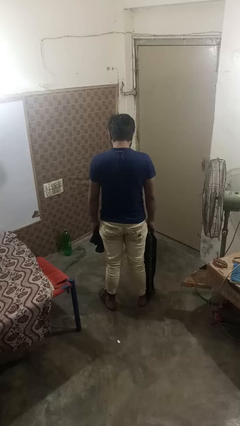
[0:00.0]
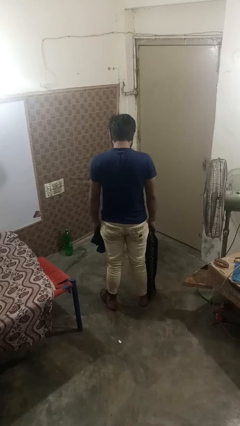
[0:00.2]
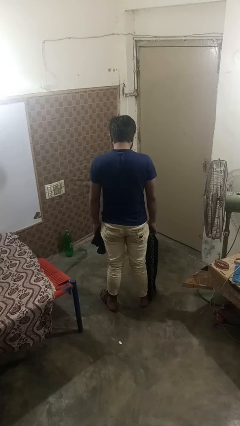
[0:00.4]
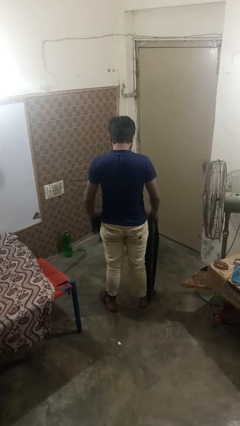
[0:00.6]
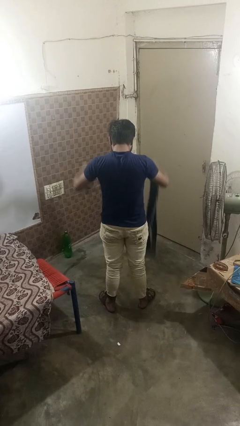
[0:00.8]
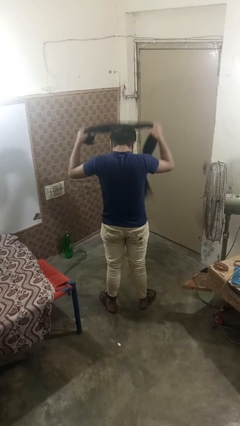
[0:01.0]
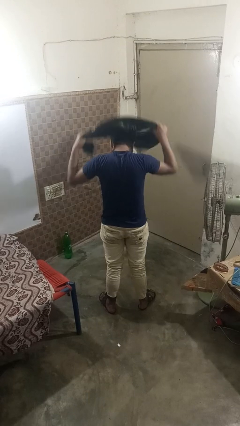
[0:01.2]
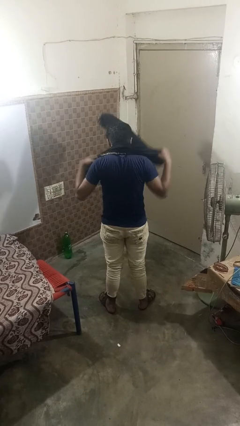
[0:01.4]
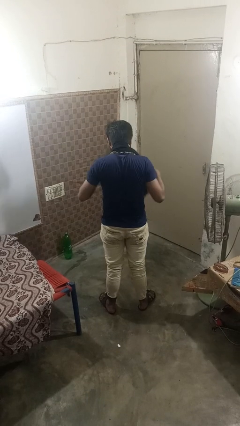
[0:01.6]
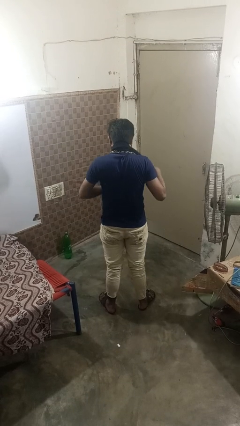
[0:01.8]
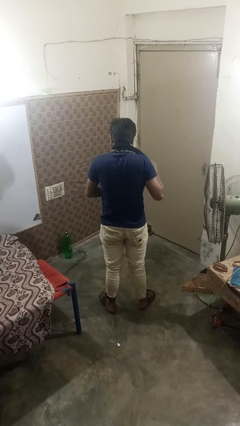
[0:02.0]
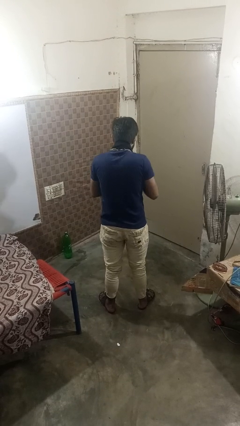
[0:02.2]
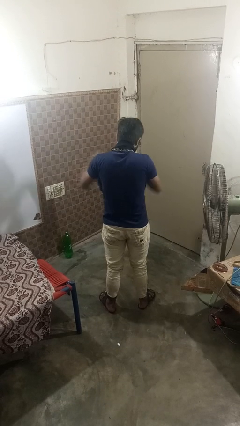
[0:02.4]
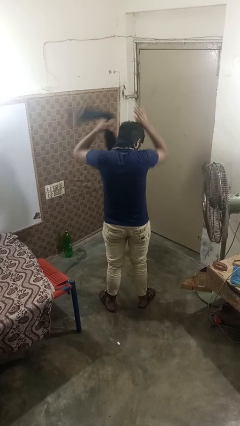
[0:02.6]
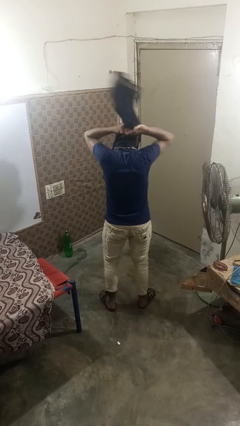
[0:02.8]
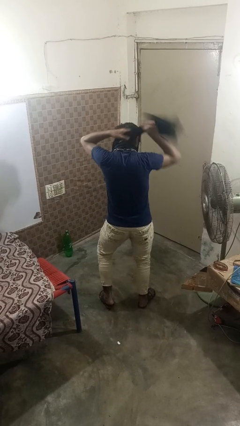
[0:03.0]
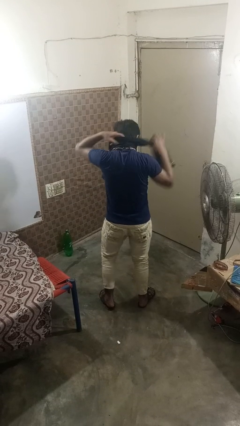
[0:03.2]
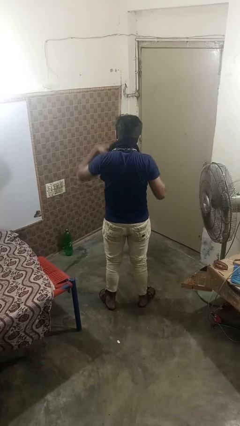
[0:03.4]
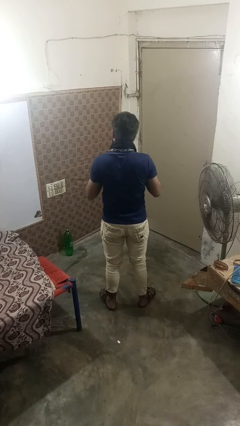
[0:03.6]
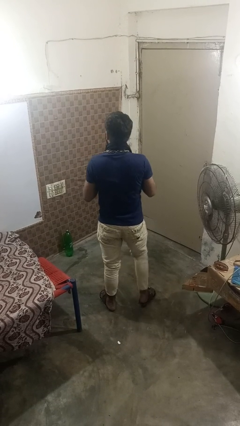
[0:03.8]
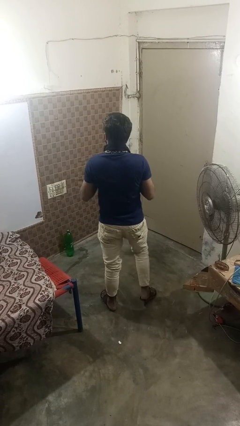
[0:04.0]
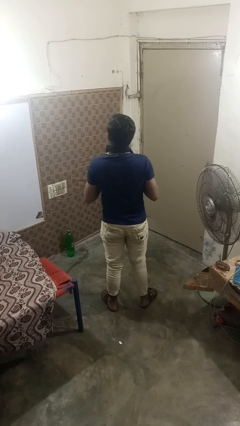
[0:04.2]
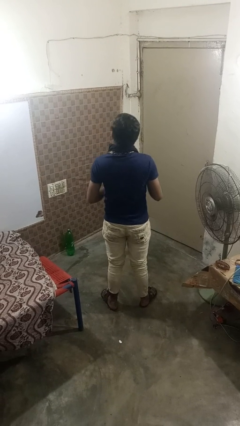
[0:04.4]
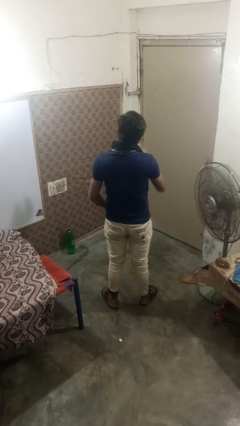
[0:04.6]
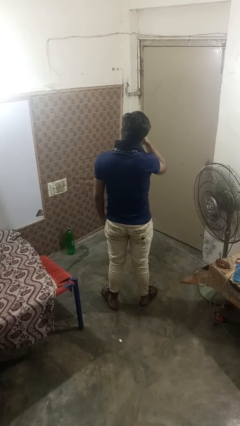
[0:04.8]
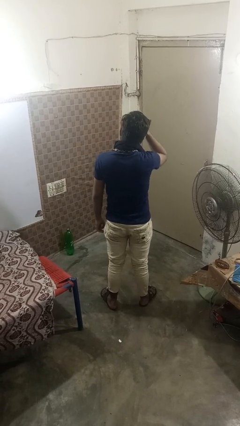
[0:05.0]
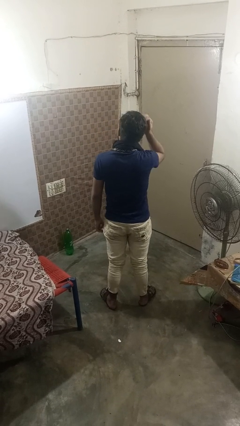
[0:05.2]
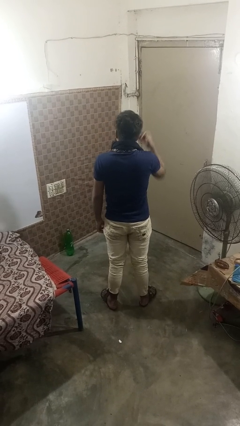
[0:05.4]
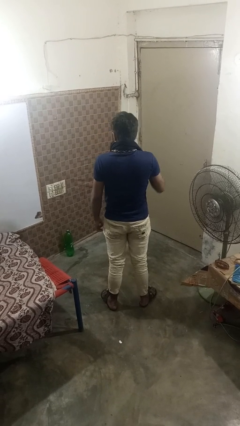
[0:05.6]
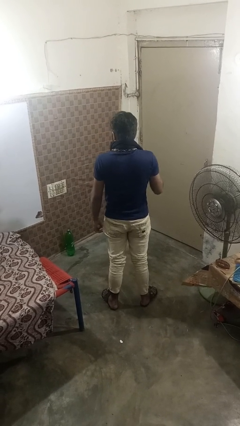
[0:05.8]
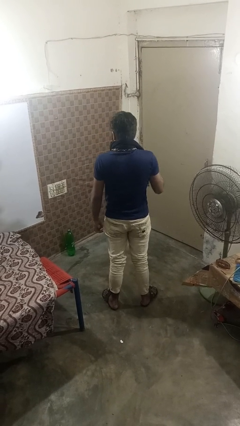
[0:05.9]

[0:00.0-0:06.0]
person puts on scarf

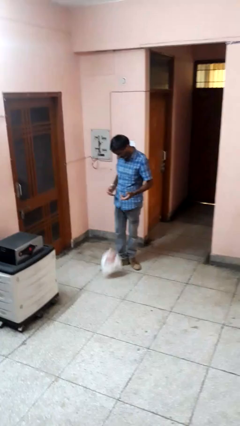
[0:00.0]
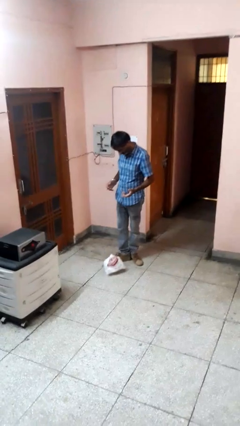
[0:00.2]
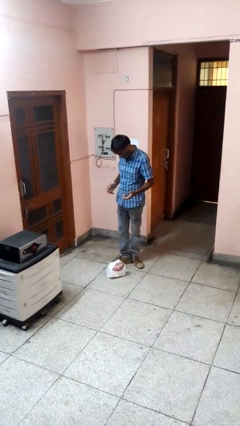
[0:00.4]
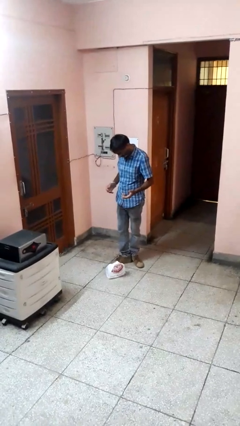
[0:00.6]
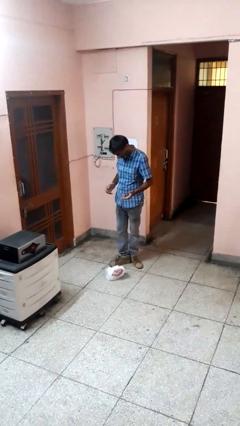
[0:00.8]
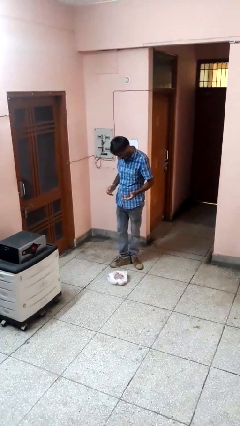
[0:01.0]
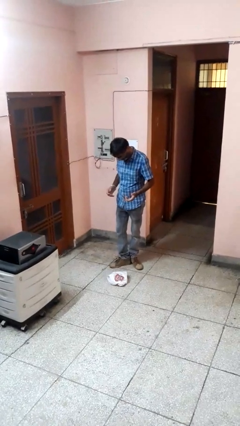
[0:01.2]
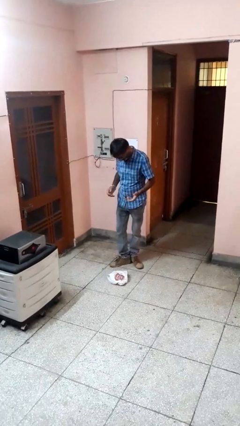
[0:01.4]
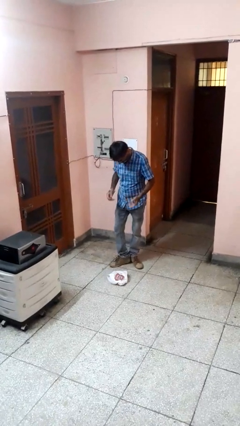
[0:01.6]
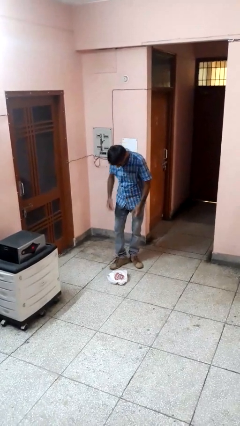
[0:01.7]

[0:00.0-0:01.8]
person drops object

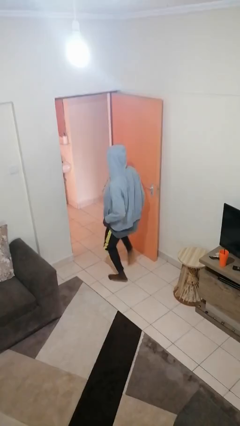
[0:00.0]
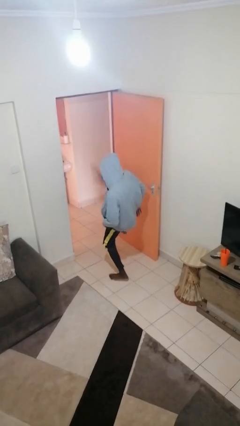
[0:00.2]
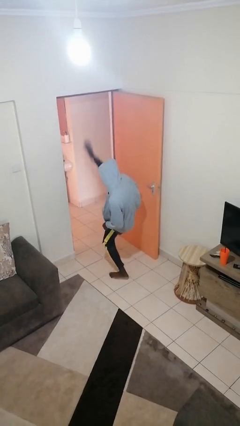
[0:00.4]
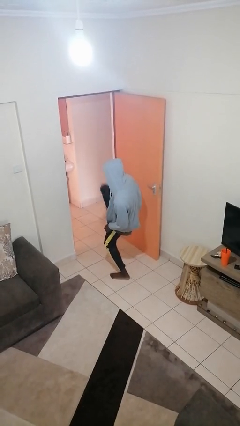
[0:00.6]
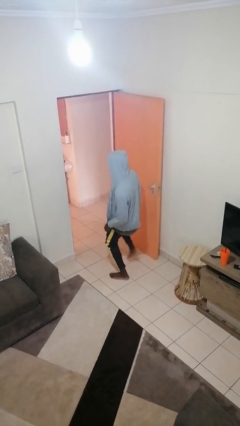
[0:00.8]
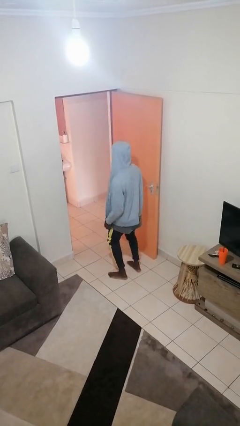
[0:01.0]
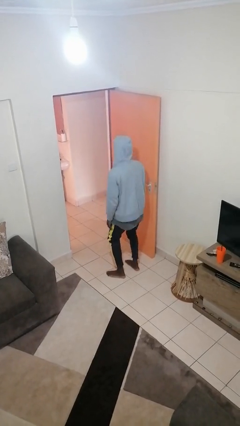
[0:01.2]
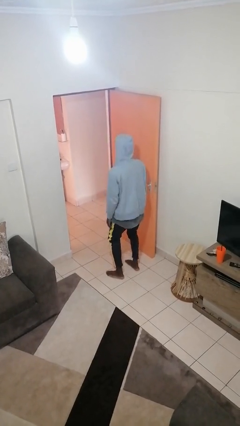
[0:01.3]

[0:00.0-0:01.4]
person karate kicks

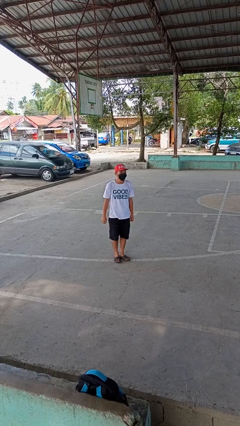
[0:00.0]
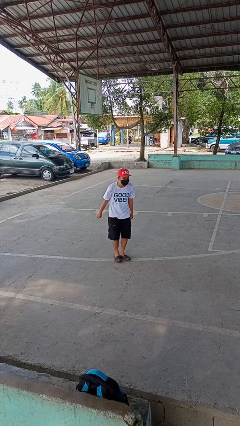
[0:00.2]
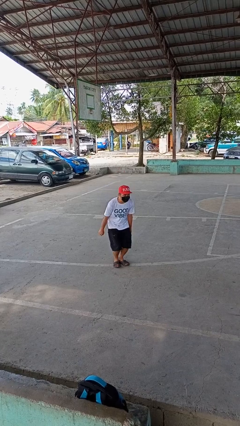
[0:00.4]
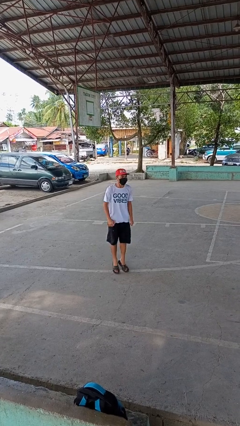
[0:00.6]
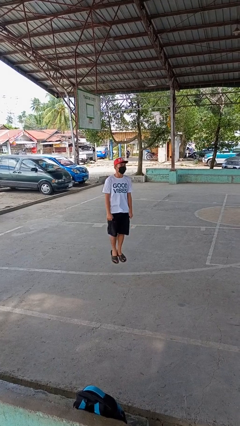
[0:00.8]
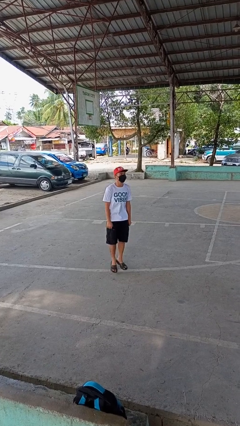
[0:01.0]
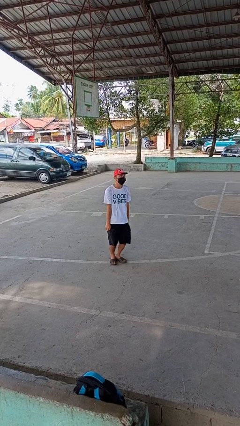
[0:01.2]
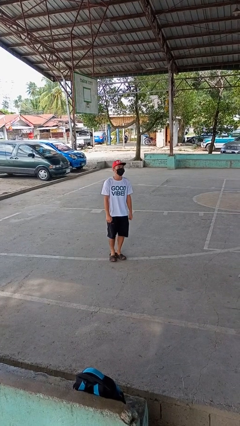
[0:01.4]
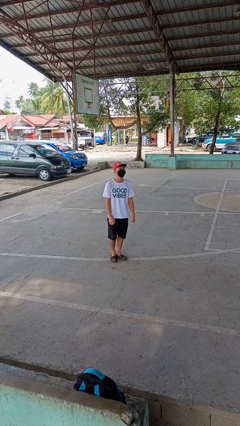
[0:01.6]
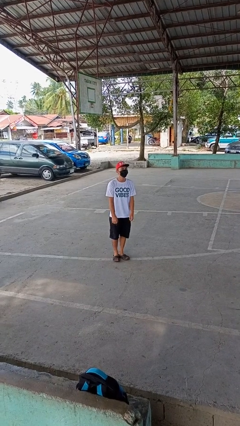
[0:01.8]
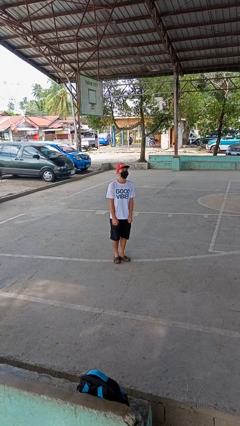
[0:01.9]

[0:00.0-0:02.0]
person jumps

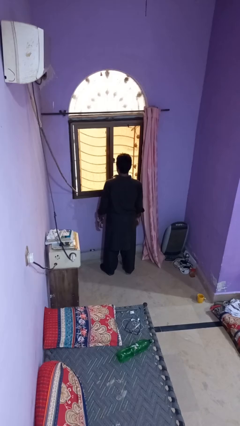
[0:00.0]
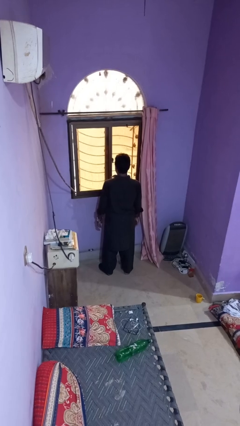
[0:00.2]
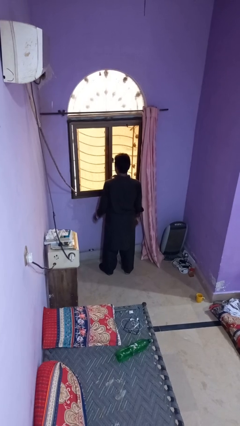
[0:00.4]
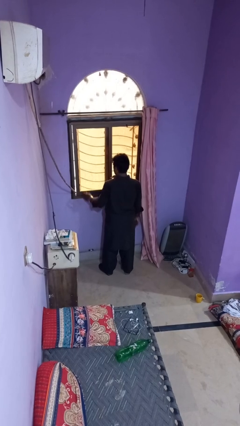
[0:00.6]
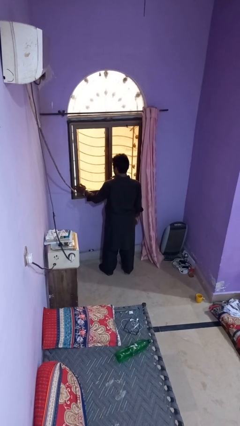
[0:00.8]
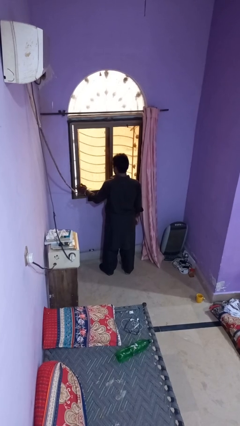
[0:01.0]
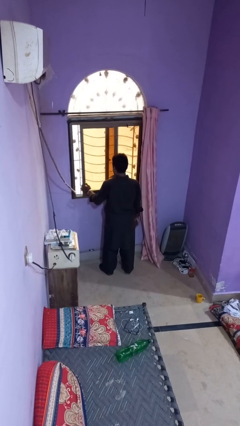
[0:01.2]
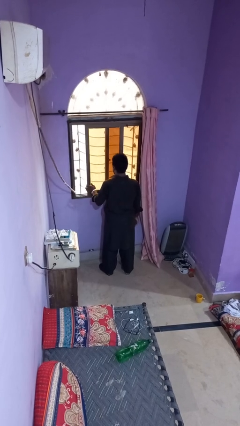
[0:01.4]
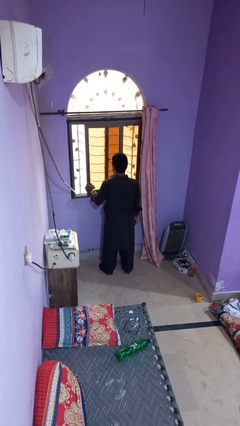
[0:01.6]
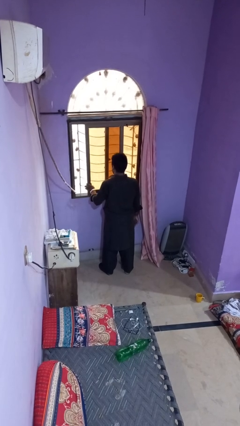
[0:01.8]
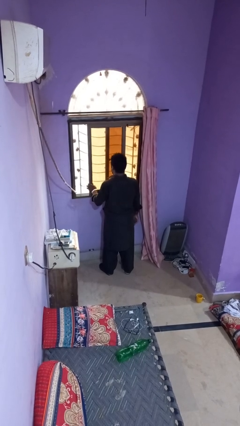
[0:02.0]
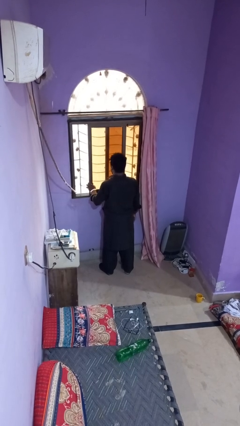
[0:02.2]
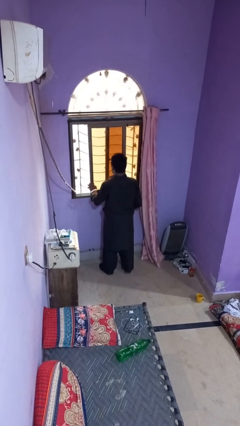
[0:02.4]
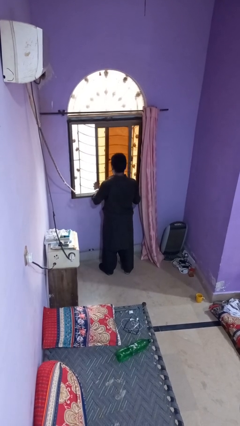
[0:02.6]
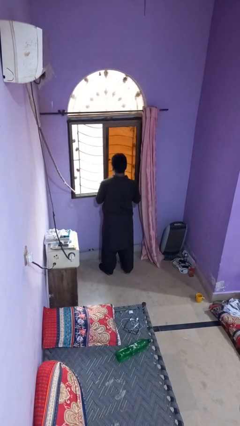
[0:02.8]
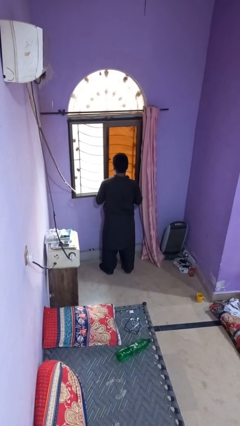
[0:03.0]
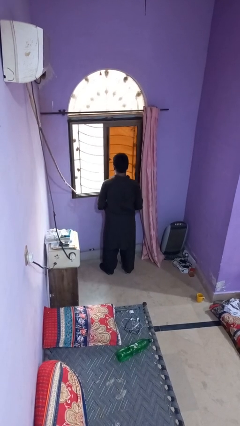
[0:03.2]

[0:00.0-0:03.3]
person opens home window

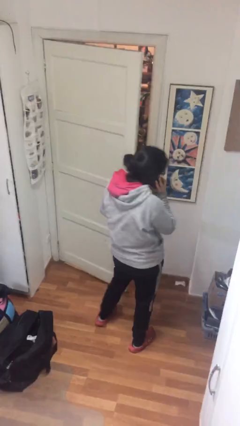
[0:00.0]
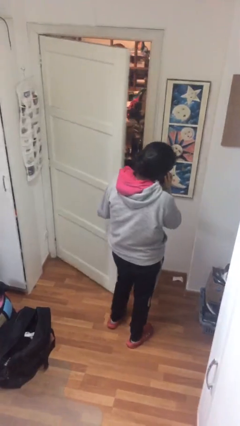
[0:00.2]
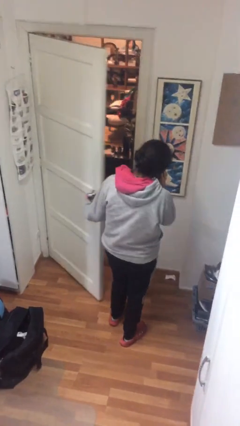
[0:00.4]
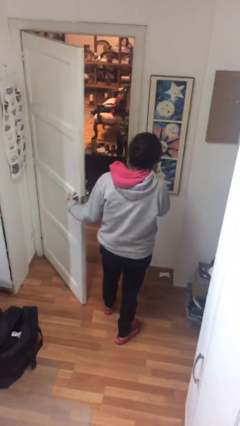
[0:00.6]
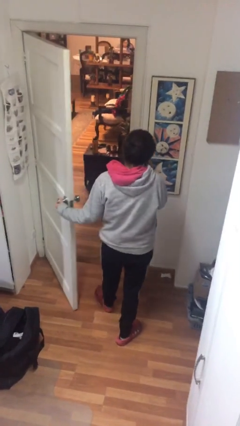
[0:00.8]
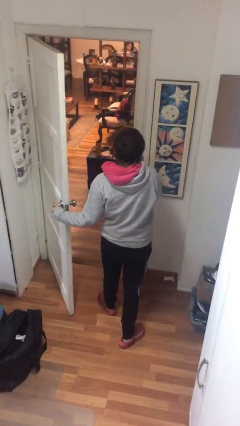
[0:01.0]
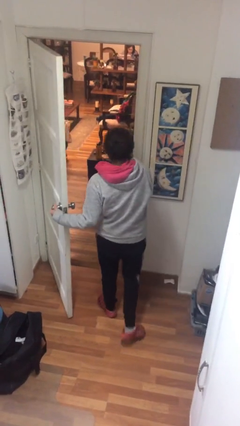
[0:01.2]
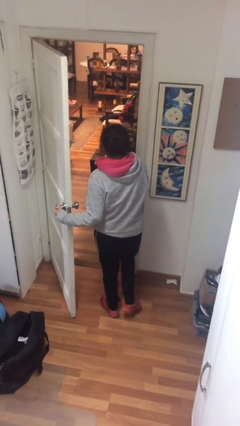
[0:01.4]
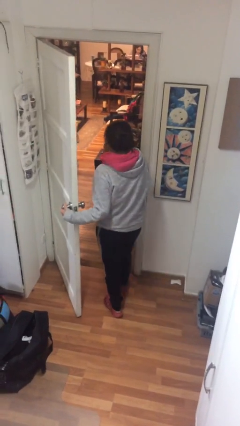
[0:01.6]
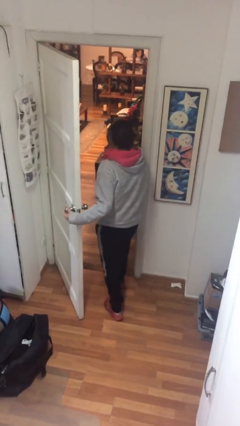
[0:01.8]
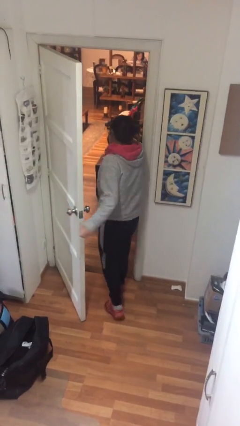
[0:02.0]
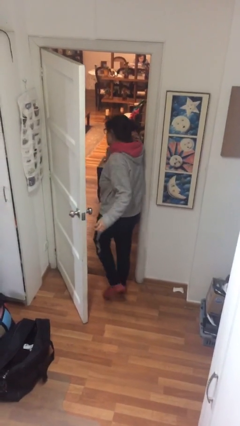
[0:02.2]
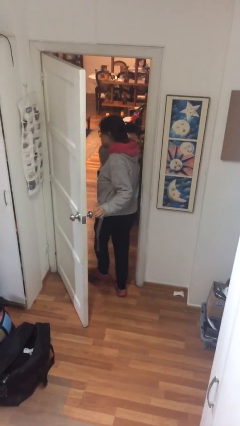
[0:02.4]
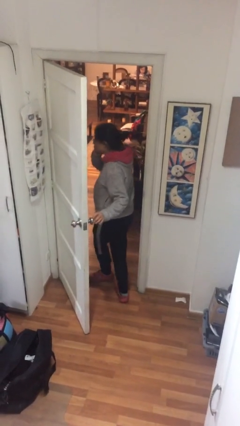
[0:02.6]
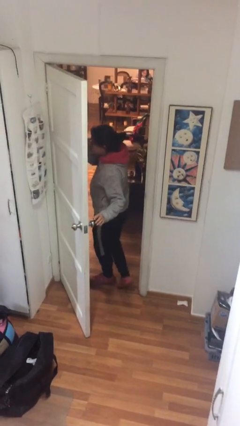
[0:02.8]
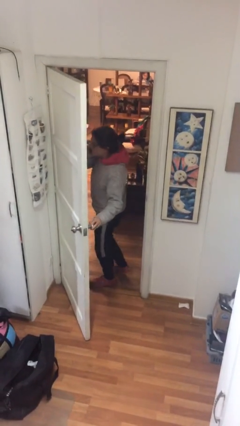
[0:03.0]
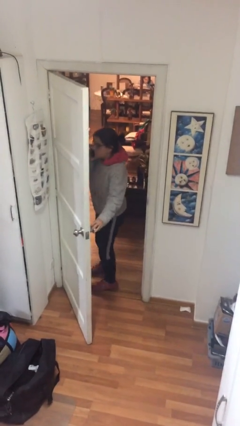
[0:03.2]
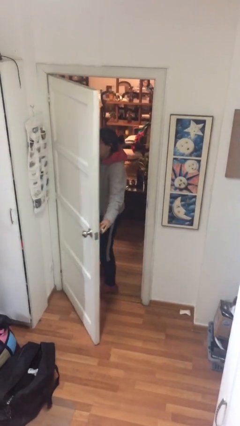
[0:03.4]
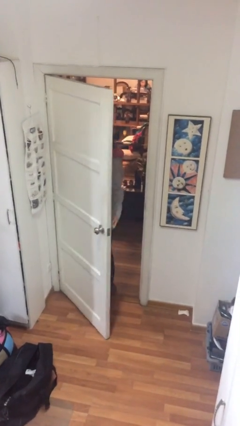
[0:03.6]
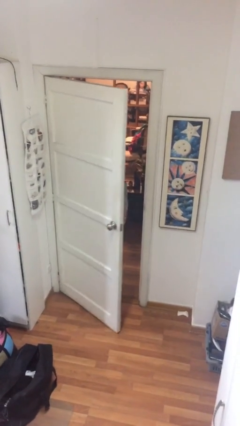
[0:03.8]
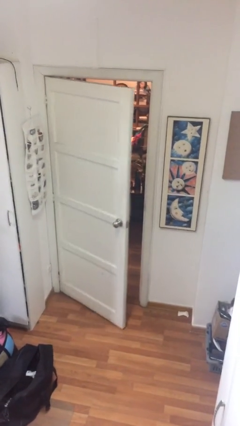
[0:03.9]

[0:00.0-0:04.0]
person exits scene through structure
